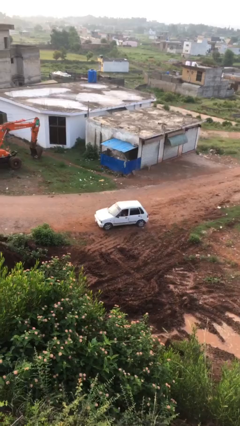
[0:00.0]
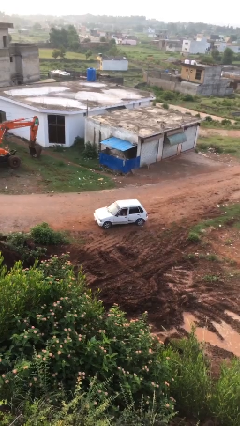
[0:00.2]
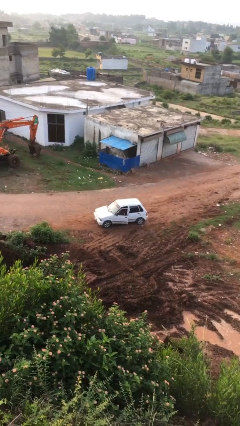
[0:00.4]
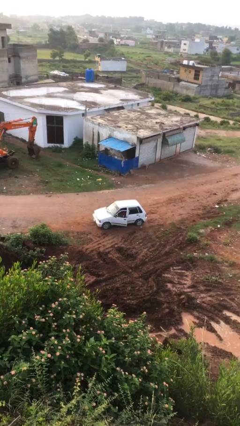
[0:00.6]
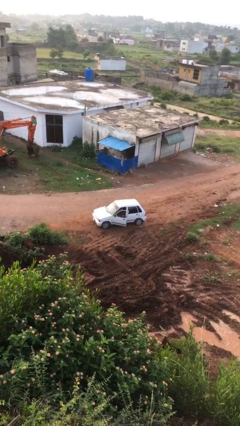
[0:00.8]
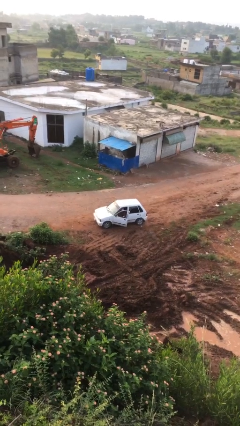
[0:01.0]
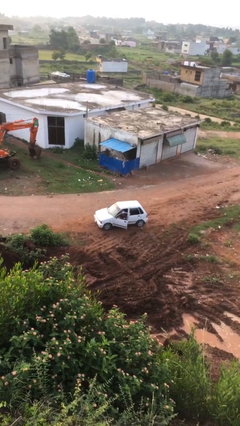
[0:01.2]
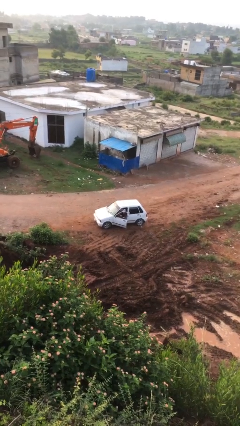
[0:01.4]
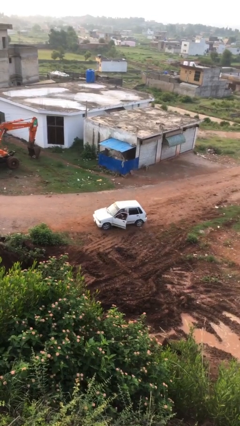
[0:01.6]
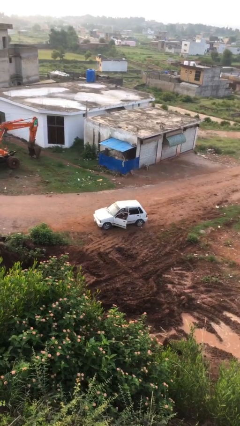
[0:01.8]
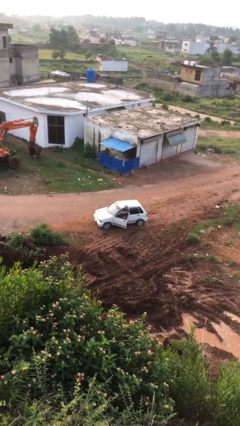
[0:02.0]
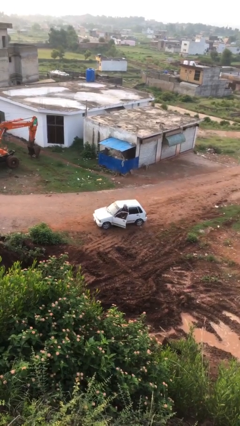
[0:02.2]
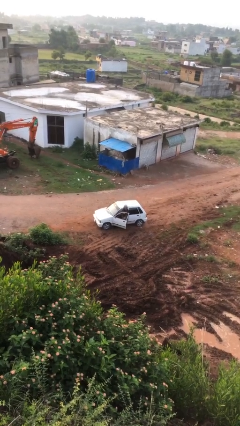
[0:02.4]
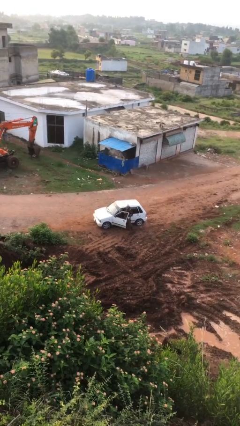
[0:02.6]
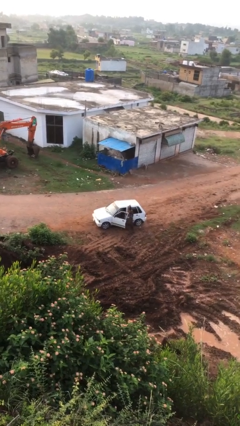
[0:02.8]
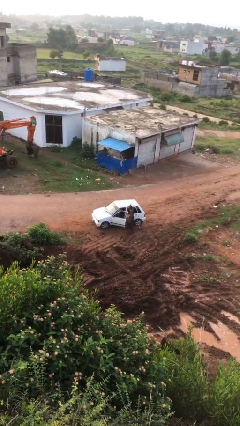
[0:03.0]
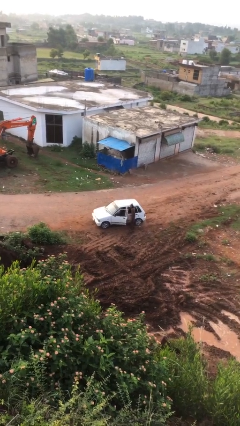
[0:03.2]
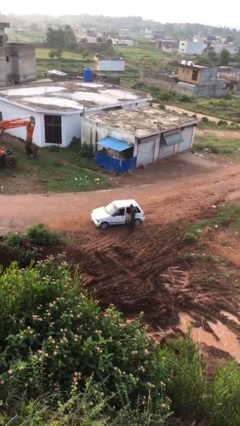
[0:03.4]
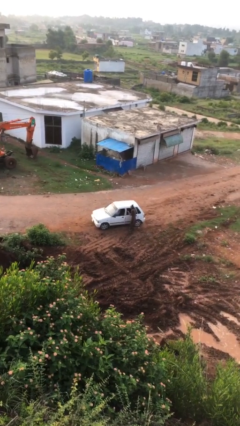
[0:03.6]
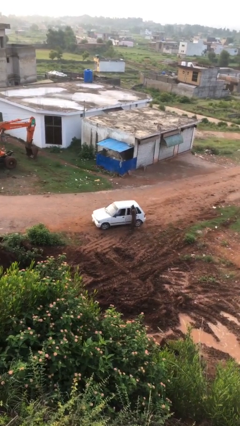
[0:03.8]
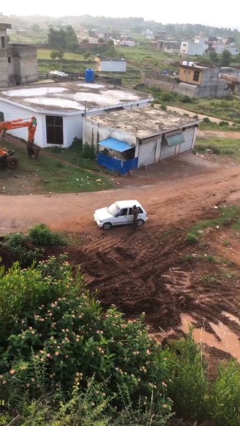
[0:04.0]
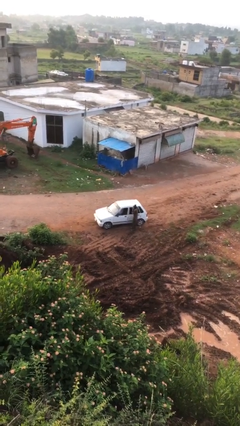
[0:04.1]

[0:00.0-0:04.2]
car drops off person

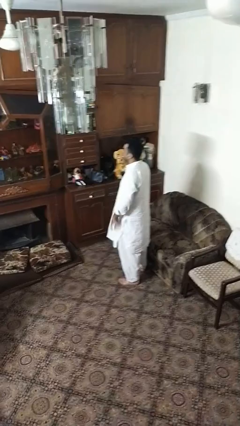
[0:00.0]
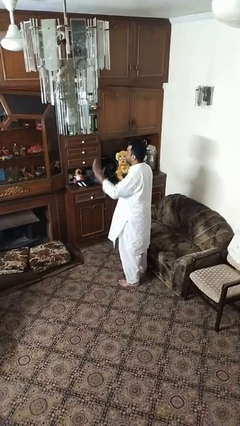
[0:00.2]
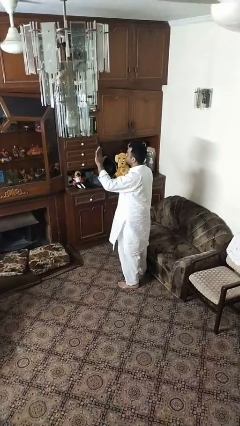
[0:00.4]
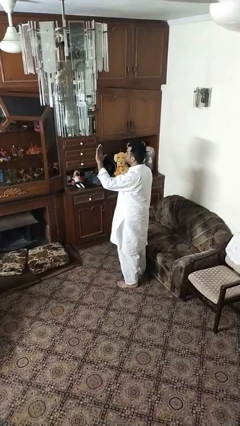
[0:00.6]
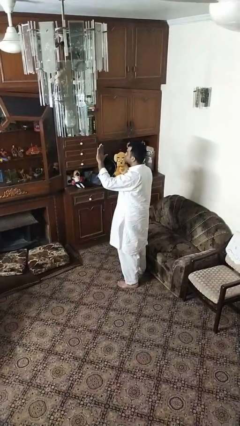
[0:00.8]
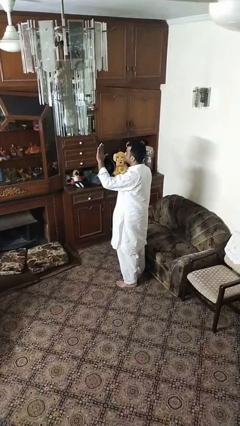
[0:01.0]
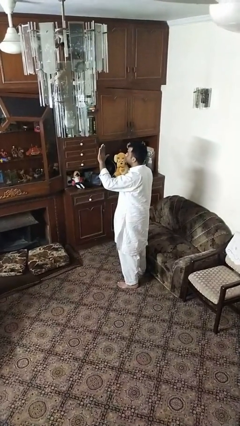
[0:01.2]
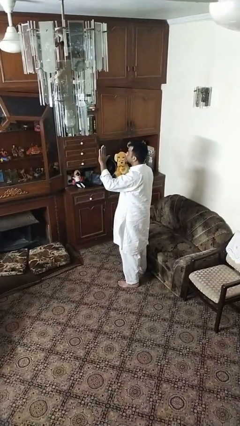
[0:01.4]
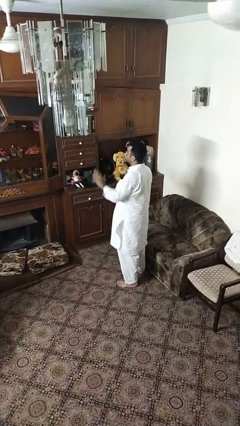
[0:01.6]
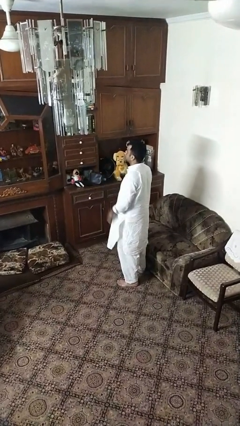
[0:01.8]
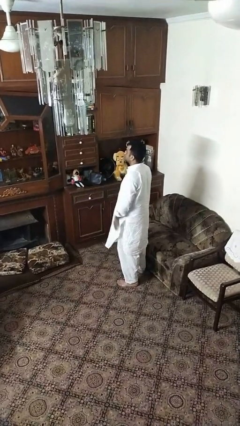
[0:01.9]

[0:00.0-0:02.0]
person gestures stop

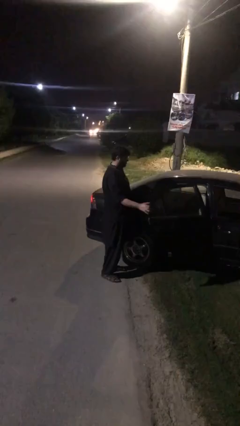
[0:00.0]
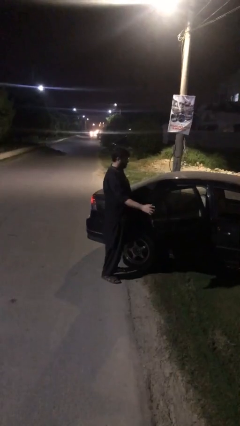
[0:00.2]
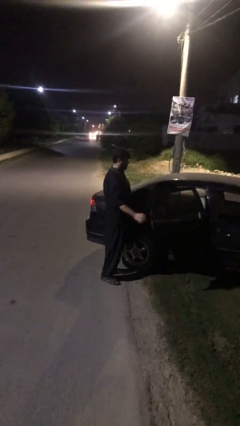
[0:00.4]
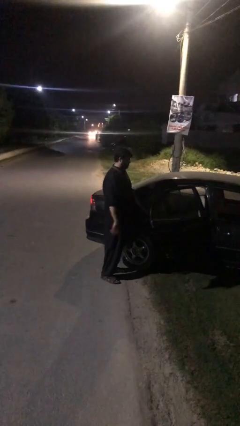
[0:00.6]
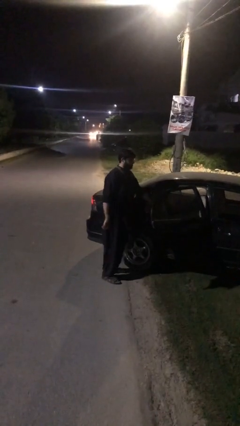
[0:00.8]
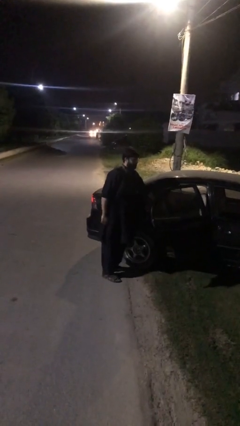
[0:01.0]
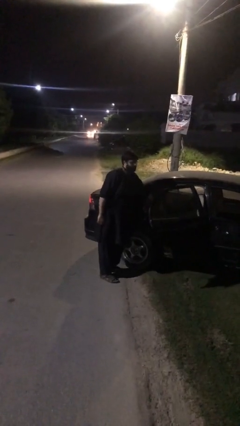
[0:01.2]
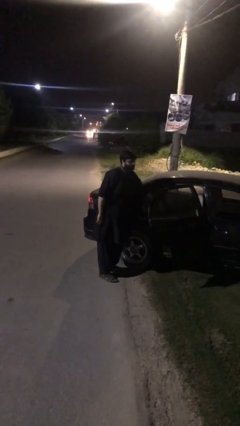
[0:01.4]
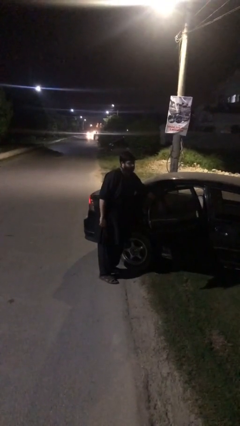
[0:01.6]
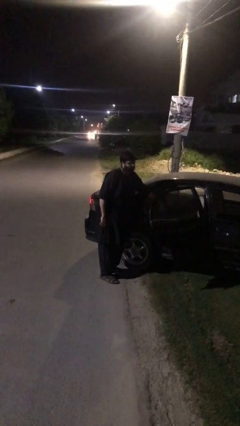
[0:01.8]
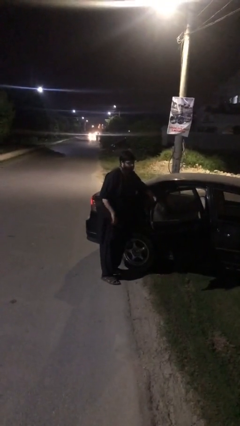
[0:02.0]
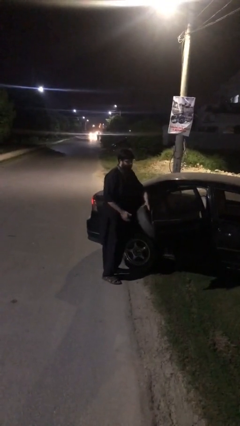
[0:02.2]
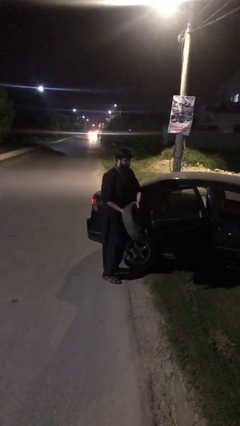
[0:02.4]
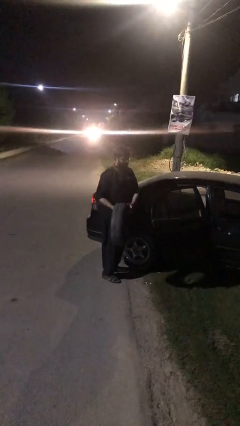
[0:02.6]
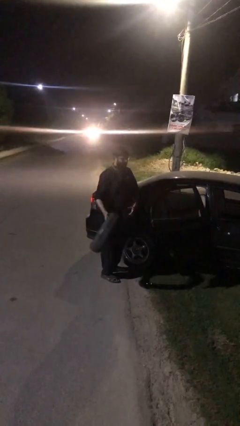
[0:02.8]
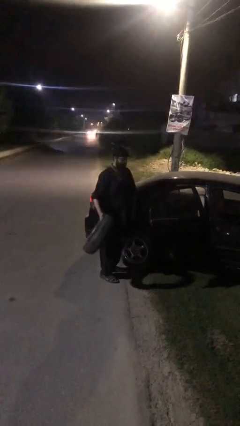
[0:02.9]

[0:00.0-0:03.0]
person unloads car

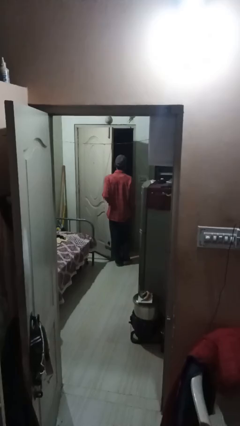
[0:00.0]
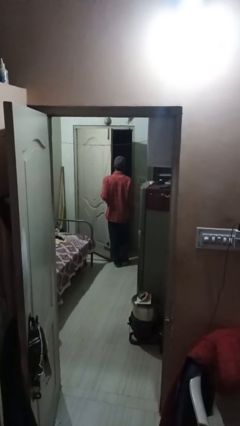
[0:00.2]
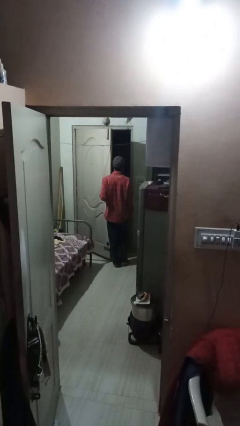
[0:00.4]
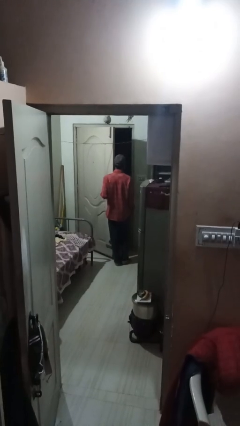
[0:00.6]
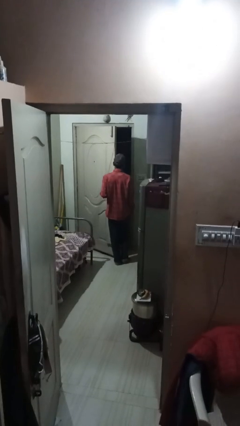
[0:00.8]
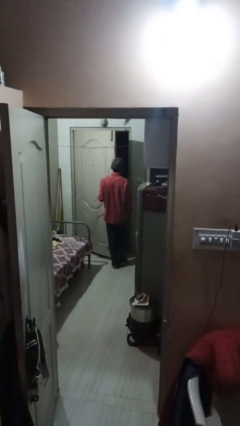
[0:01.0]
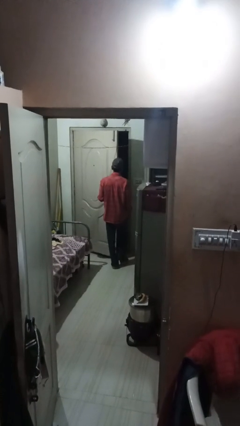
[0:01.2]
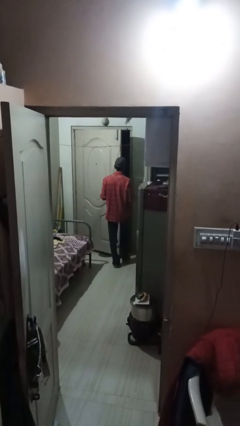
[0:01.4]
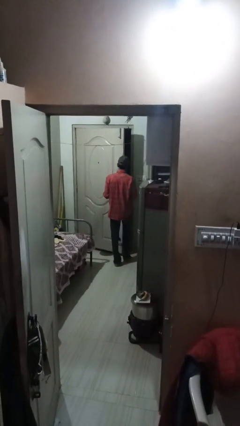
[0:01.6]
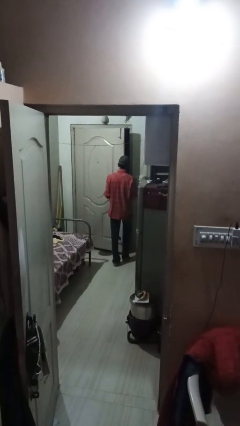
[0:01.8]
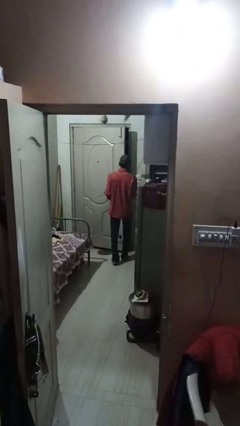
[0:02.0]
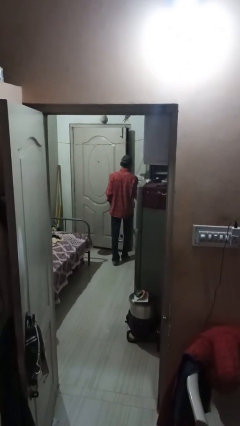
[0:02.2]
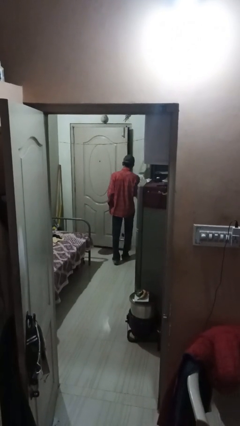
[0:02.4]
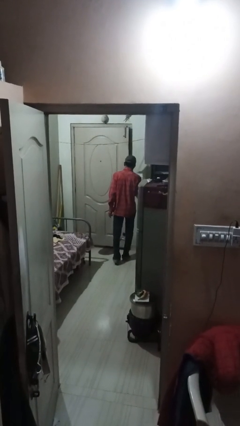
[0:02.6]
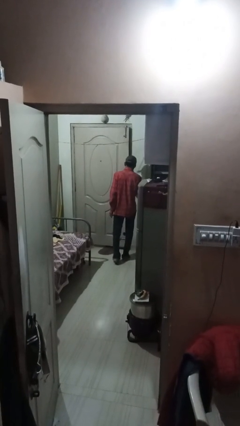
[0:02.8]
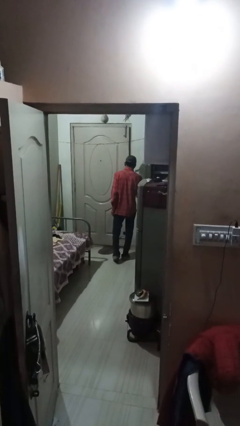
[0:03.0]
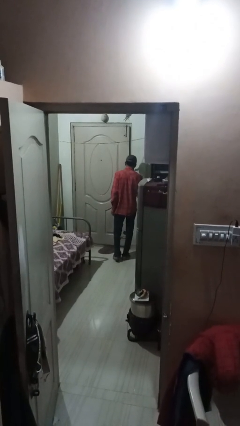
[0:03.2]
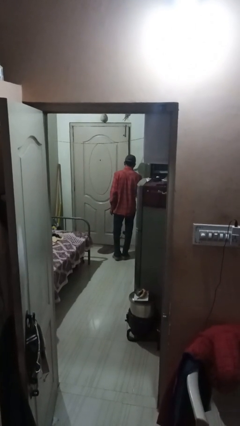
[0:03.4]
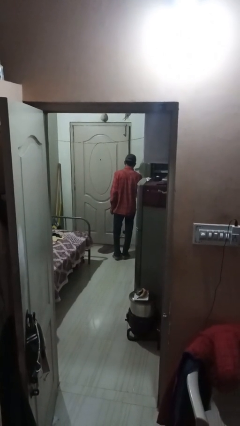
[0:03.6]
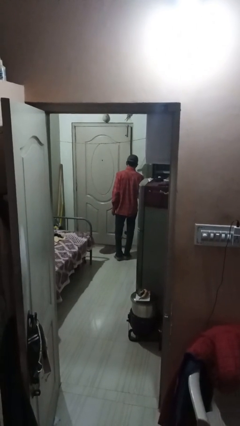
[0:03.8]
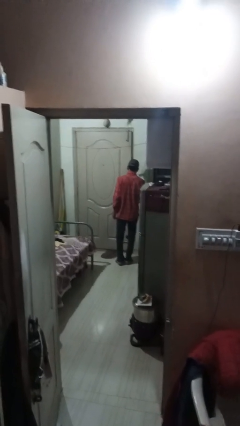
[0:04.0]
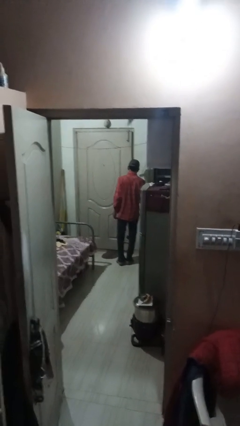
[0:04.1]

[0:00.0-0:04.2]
person closes facility door

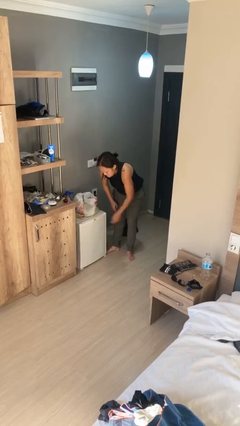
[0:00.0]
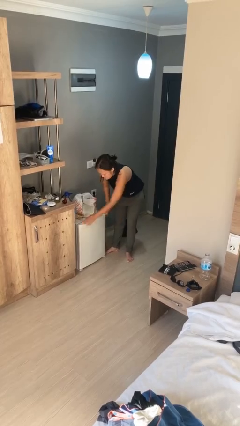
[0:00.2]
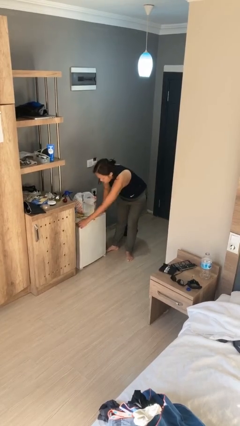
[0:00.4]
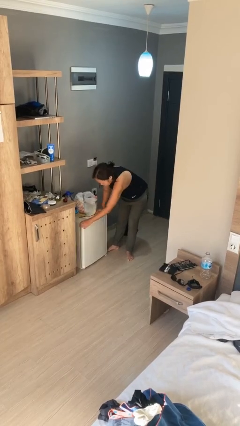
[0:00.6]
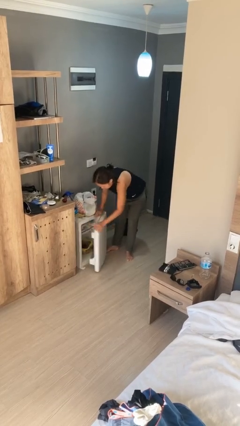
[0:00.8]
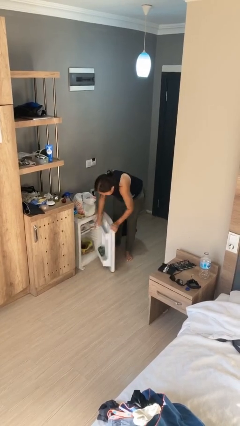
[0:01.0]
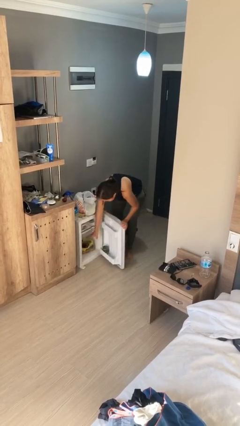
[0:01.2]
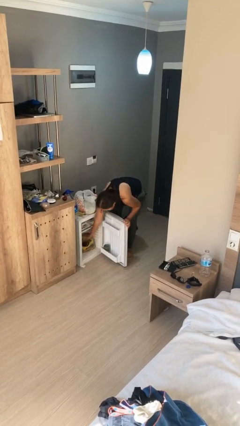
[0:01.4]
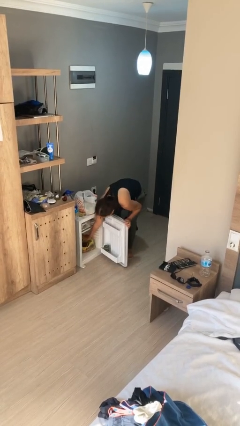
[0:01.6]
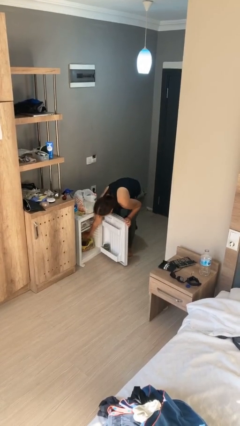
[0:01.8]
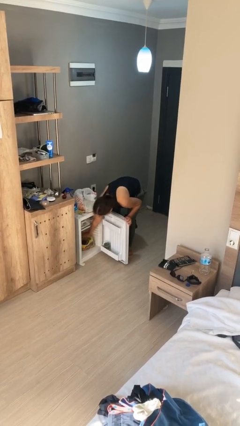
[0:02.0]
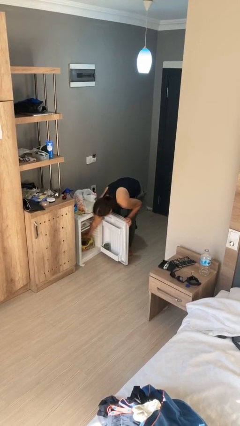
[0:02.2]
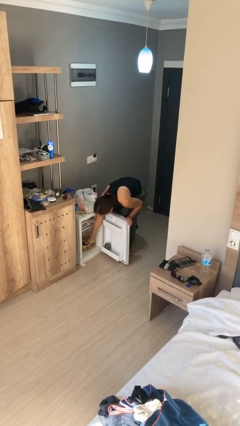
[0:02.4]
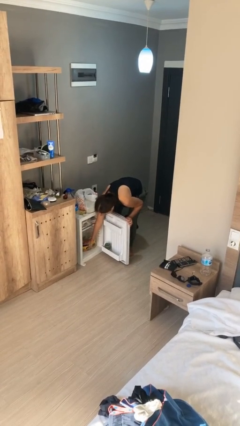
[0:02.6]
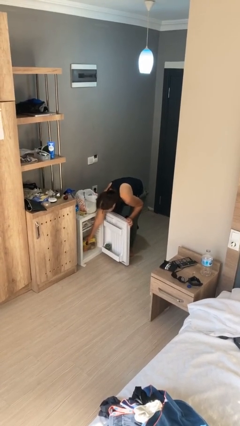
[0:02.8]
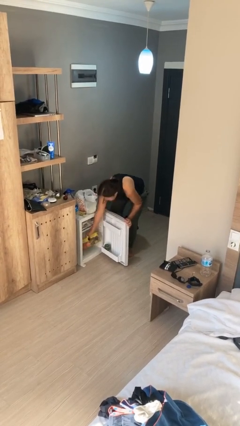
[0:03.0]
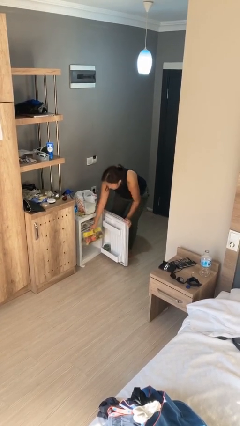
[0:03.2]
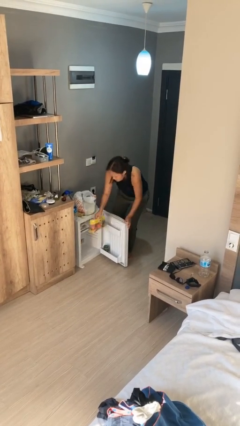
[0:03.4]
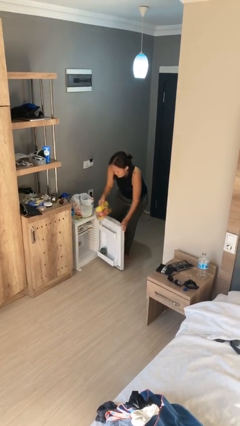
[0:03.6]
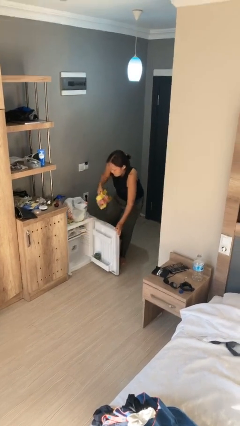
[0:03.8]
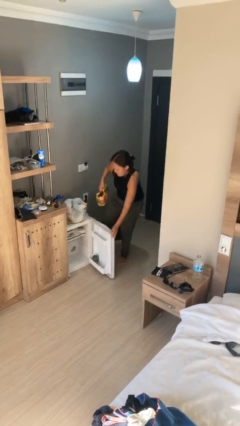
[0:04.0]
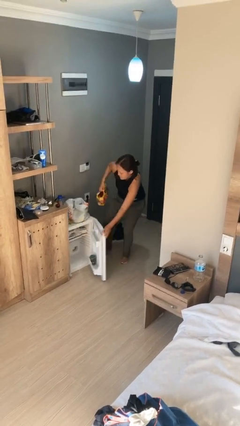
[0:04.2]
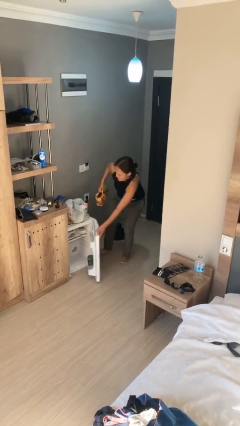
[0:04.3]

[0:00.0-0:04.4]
person takes object from refrigerator

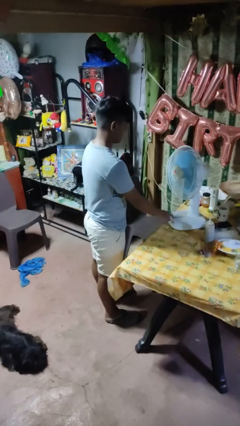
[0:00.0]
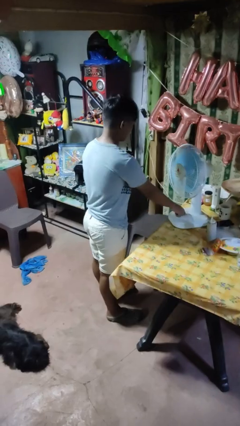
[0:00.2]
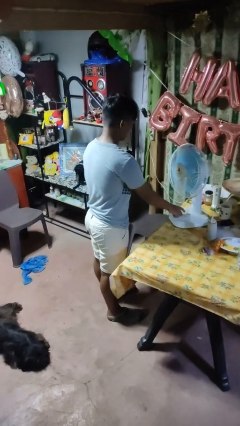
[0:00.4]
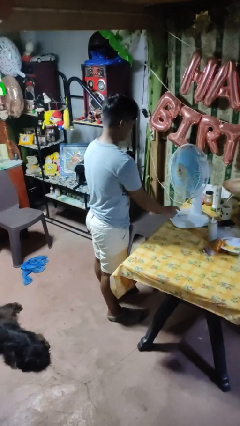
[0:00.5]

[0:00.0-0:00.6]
person turns off fan
